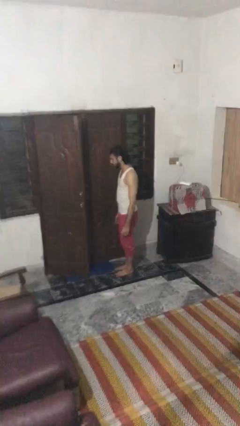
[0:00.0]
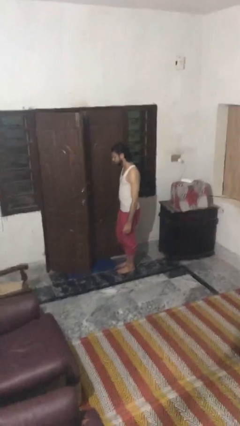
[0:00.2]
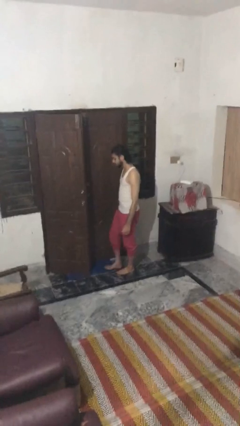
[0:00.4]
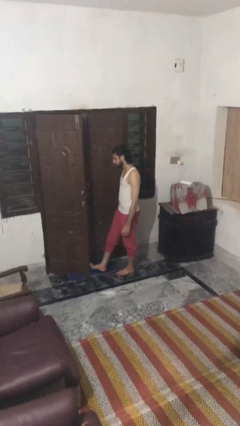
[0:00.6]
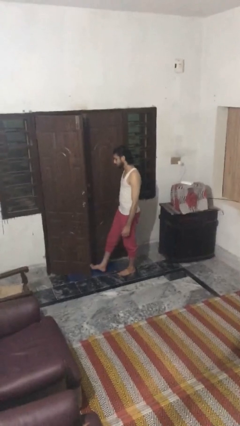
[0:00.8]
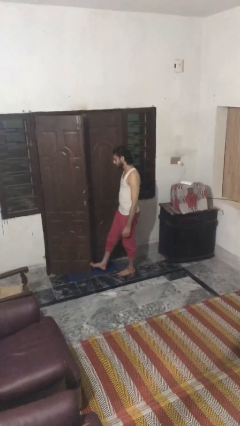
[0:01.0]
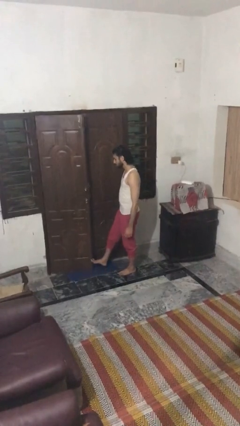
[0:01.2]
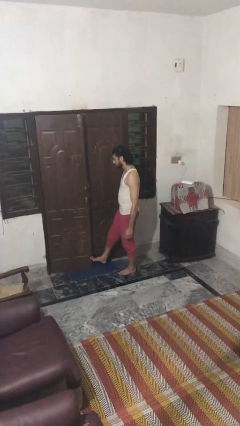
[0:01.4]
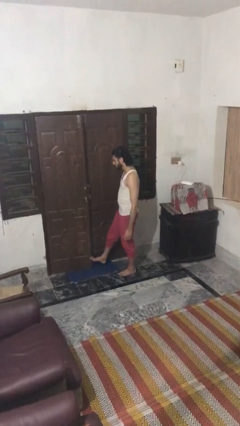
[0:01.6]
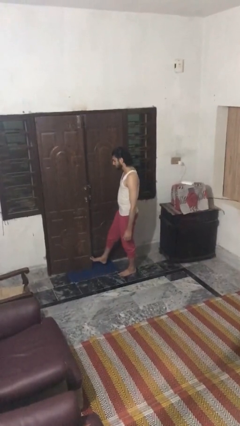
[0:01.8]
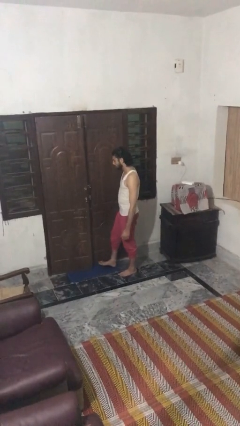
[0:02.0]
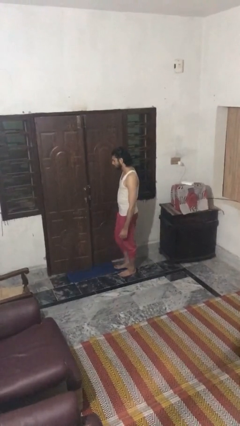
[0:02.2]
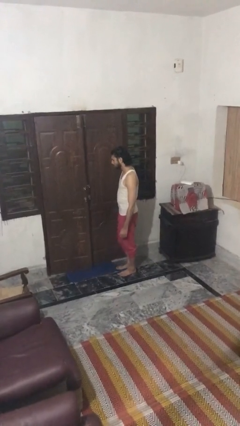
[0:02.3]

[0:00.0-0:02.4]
person closes door with foot

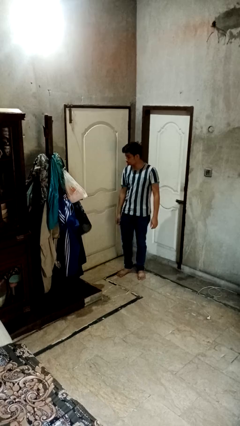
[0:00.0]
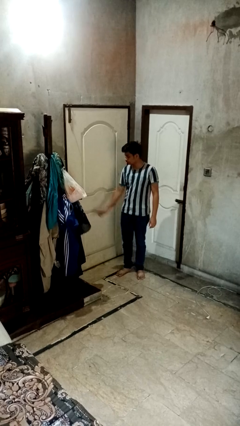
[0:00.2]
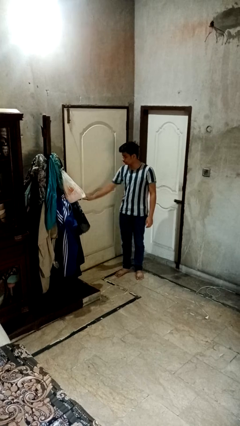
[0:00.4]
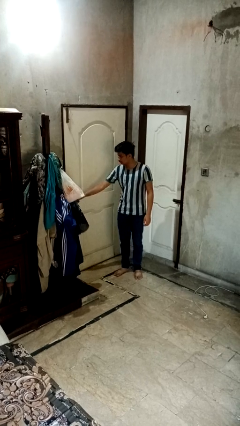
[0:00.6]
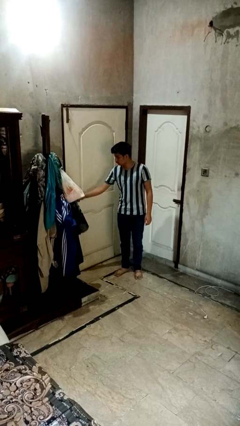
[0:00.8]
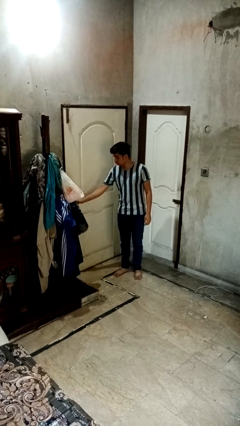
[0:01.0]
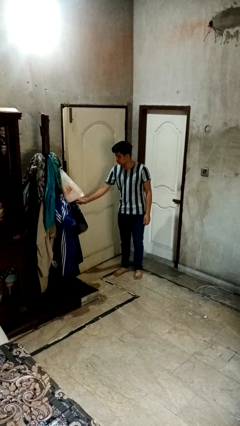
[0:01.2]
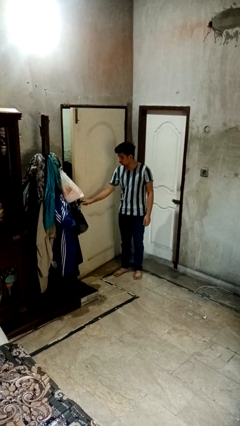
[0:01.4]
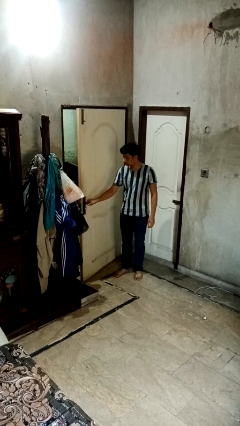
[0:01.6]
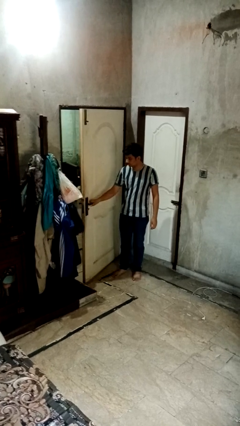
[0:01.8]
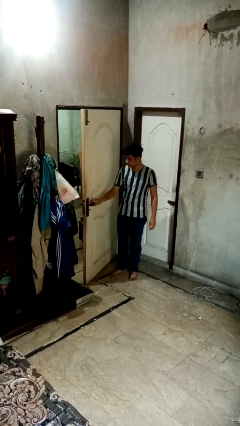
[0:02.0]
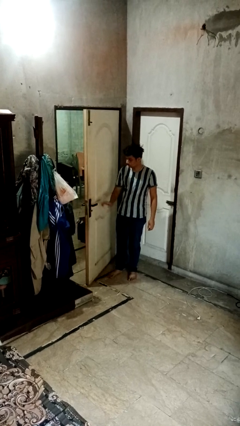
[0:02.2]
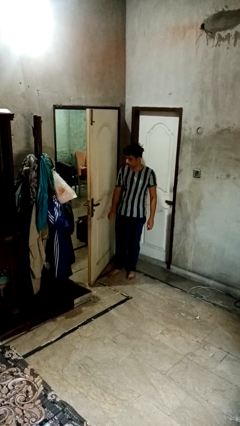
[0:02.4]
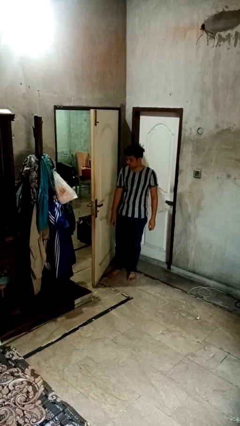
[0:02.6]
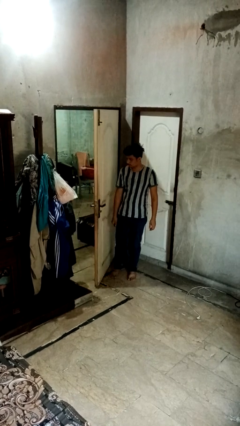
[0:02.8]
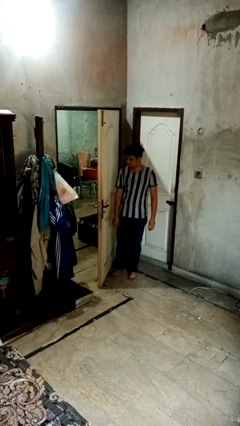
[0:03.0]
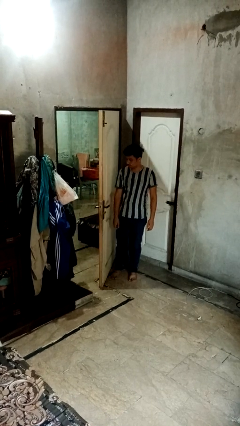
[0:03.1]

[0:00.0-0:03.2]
person opens facility door

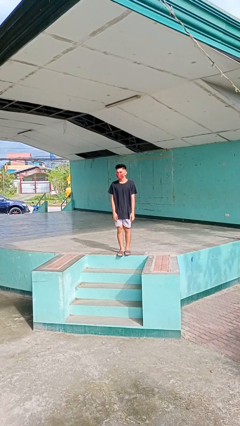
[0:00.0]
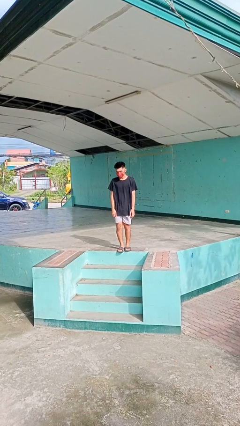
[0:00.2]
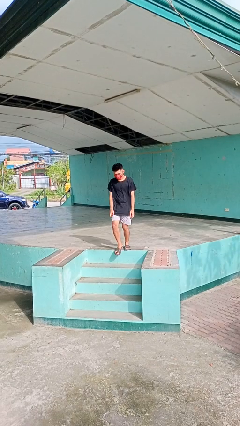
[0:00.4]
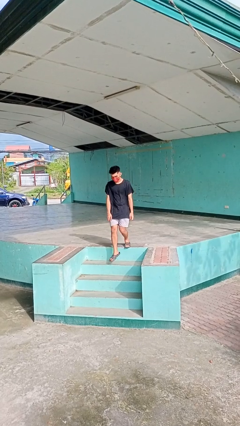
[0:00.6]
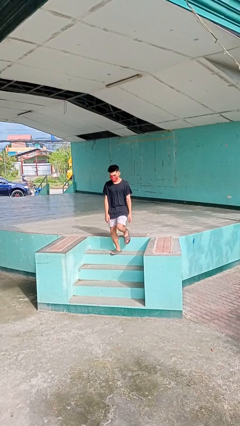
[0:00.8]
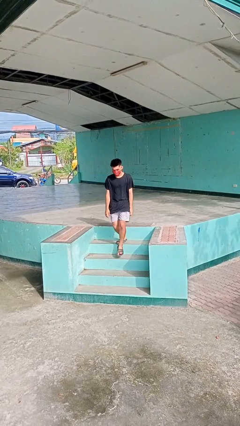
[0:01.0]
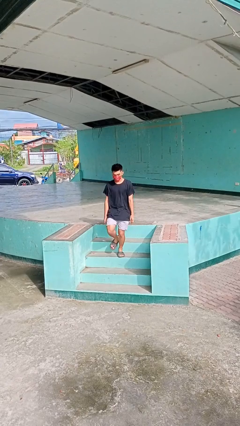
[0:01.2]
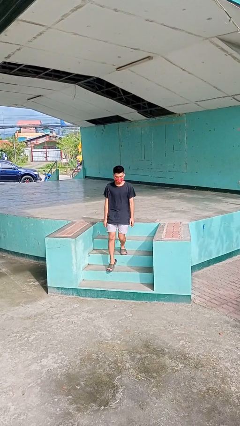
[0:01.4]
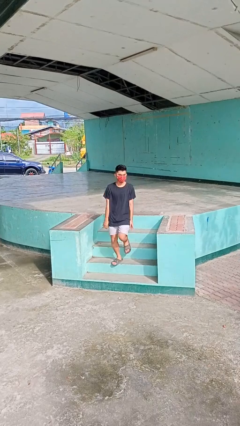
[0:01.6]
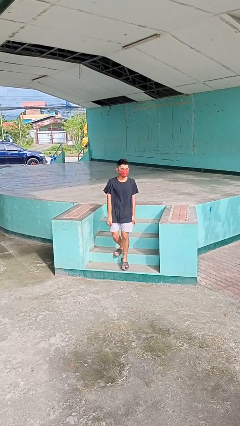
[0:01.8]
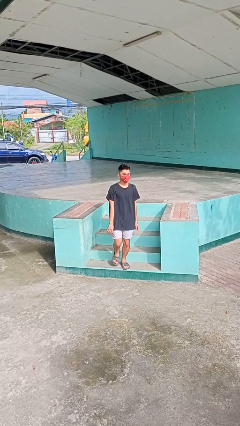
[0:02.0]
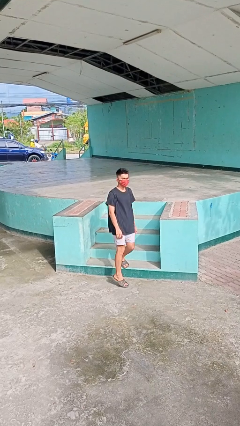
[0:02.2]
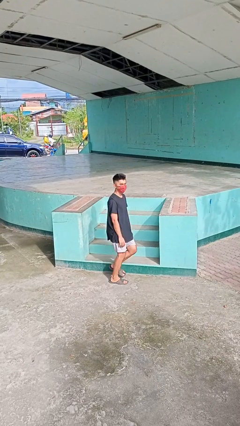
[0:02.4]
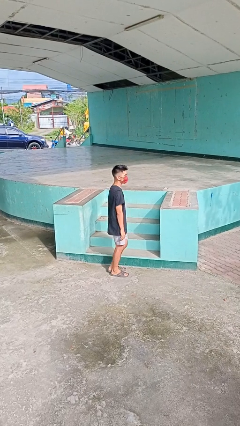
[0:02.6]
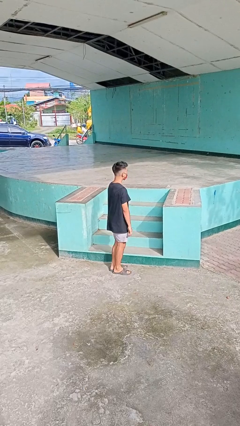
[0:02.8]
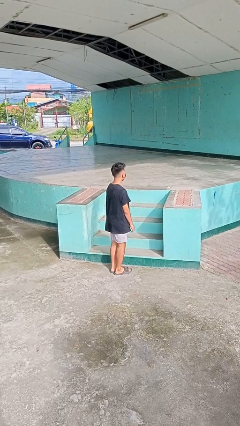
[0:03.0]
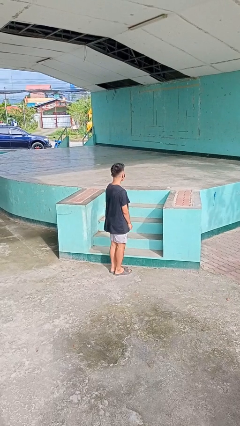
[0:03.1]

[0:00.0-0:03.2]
person climbs down stairs

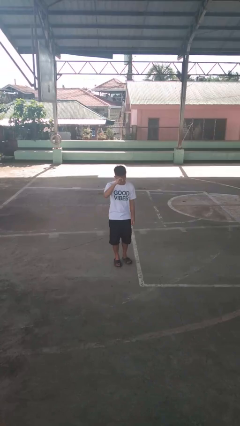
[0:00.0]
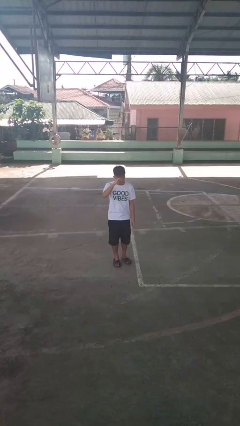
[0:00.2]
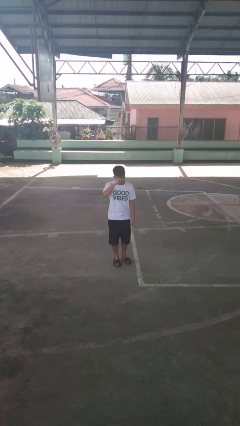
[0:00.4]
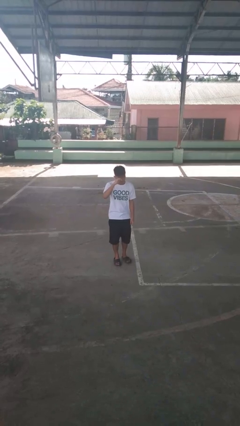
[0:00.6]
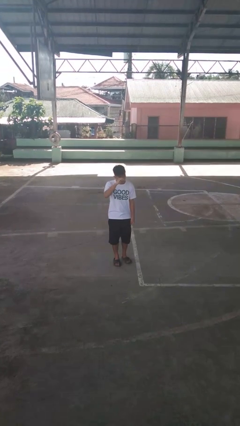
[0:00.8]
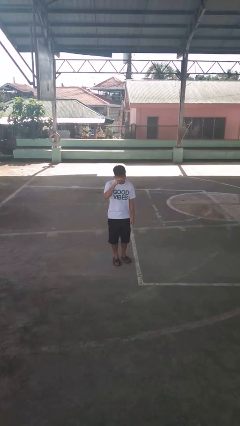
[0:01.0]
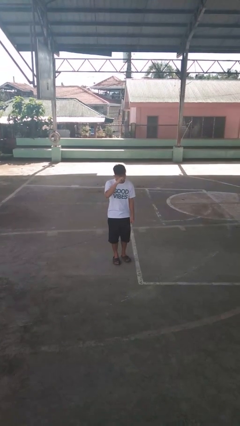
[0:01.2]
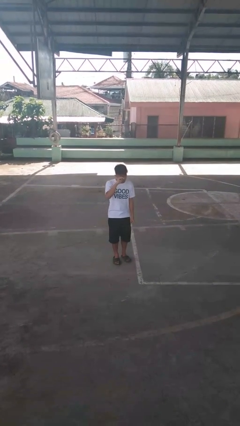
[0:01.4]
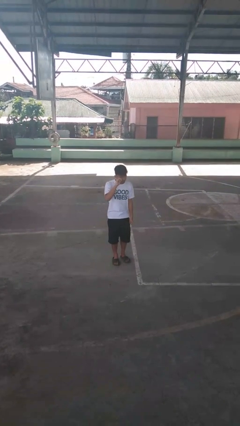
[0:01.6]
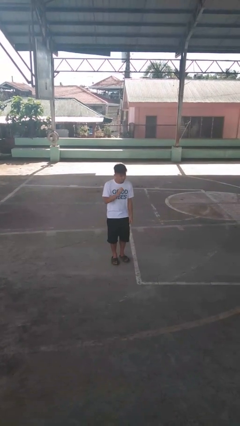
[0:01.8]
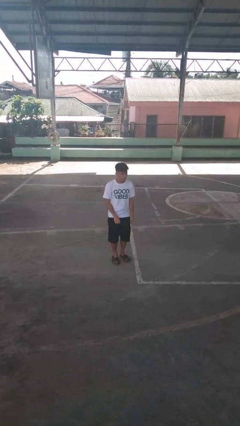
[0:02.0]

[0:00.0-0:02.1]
person rubs eyes

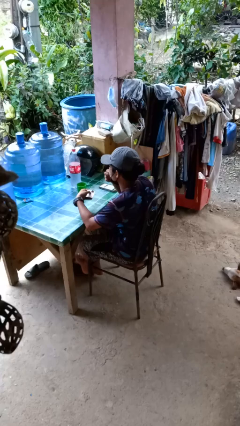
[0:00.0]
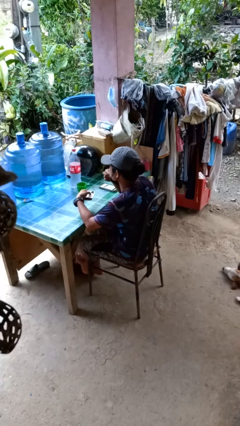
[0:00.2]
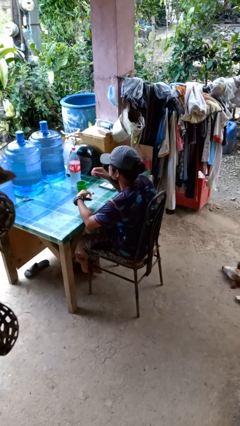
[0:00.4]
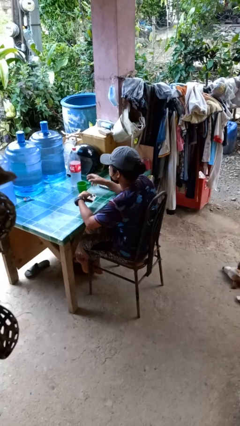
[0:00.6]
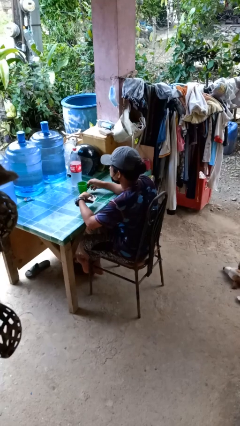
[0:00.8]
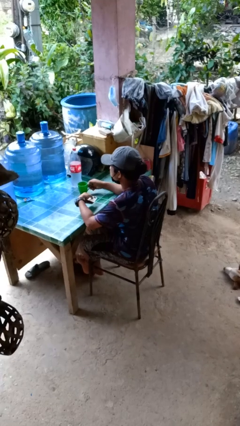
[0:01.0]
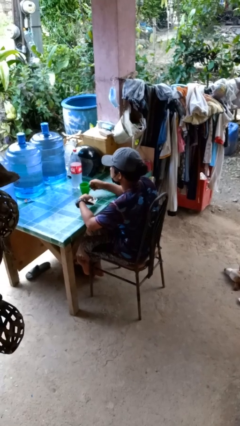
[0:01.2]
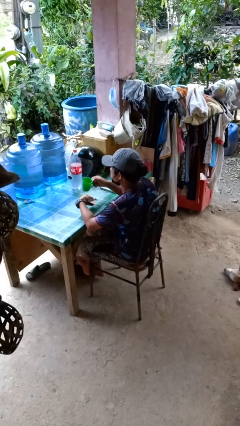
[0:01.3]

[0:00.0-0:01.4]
person takes medicine pills

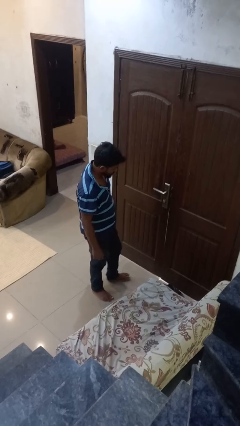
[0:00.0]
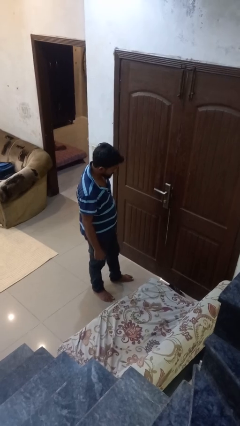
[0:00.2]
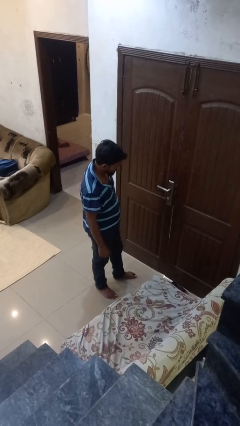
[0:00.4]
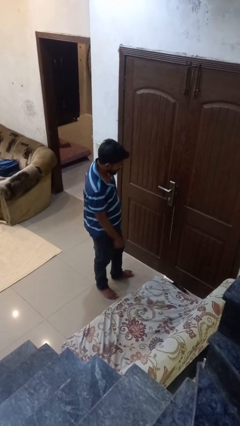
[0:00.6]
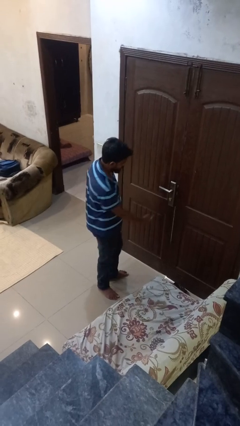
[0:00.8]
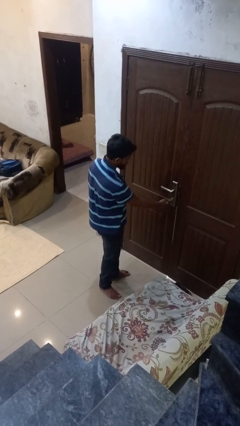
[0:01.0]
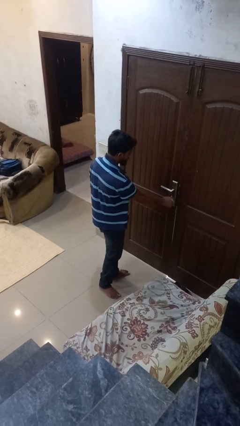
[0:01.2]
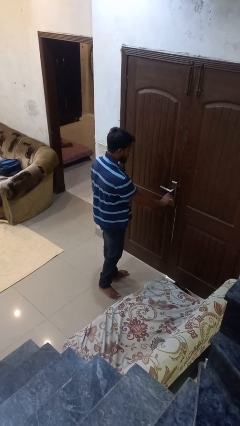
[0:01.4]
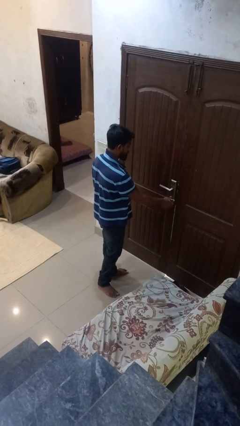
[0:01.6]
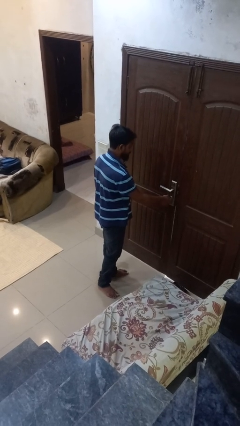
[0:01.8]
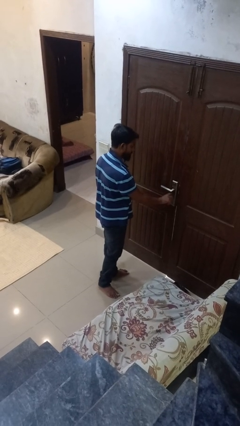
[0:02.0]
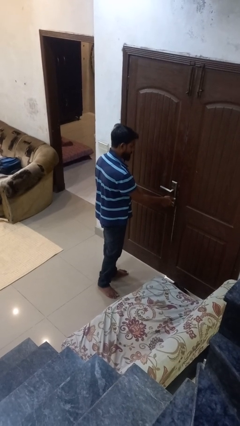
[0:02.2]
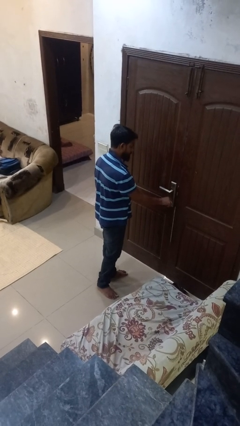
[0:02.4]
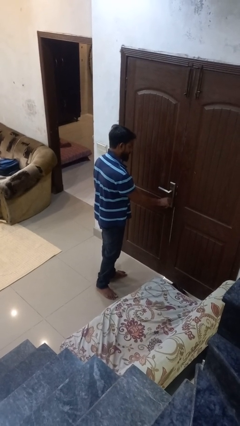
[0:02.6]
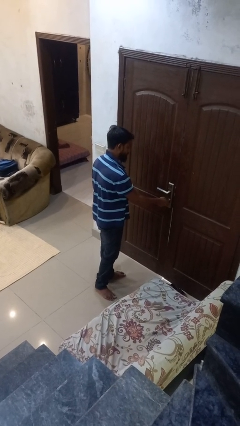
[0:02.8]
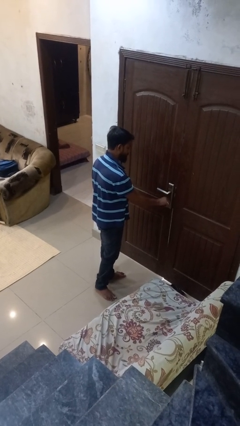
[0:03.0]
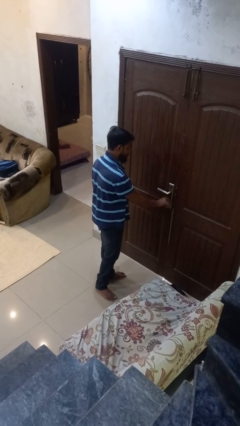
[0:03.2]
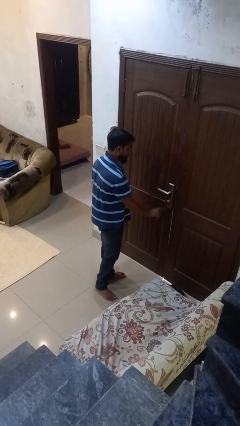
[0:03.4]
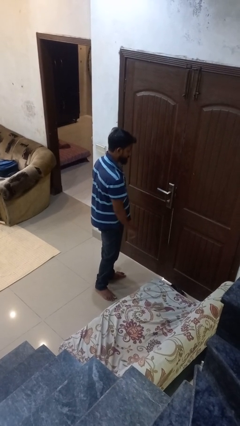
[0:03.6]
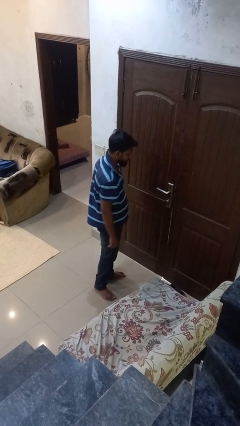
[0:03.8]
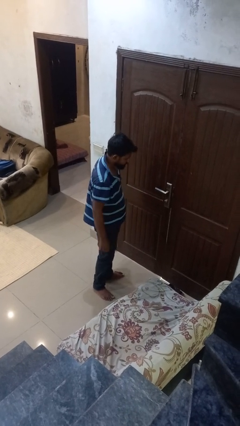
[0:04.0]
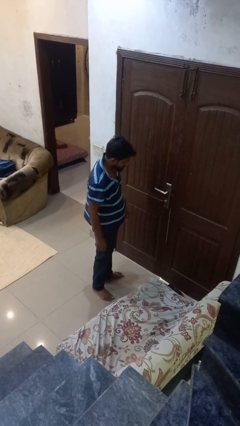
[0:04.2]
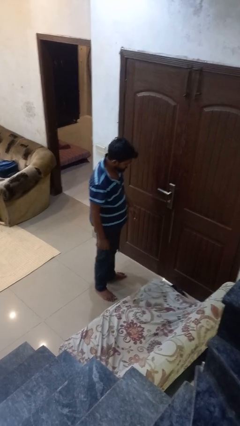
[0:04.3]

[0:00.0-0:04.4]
person unlocks door with keys

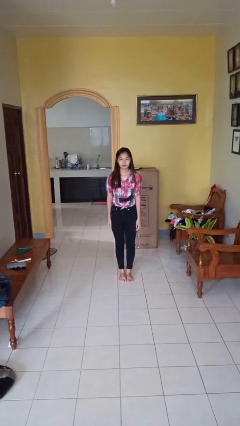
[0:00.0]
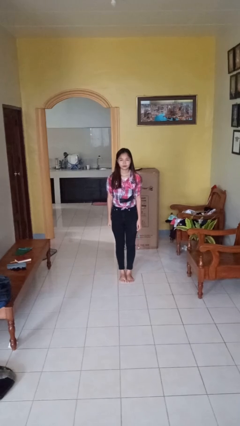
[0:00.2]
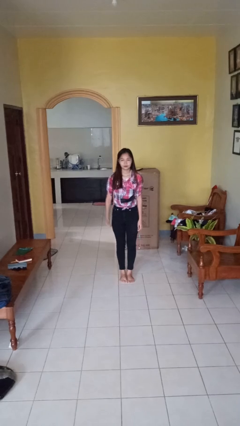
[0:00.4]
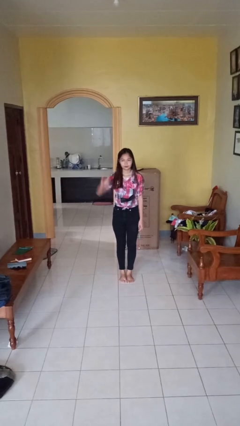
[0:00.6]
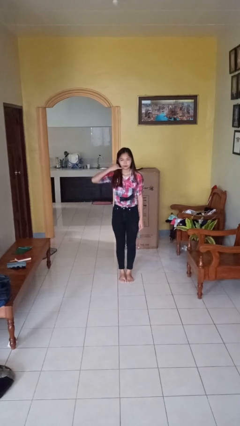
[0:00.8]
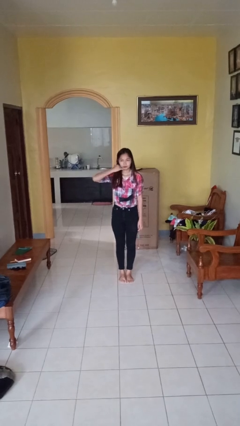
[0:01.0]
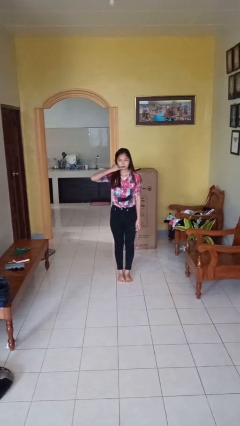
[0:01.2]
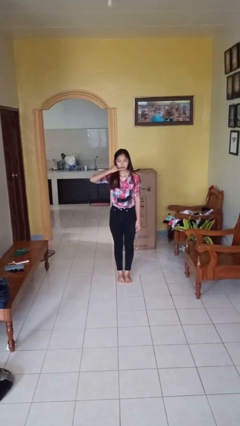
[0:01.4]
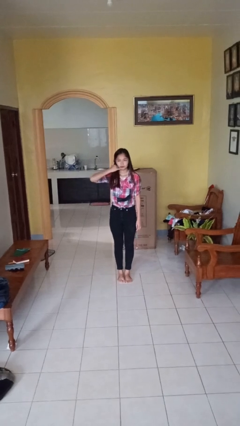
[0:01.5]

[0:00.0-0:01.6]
person gestures call me
